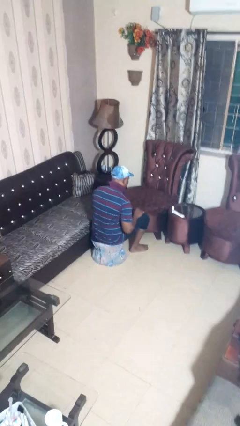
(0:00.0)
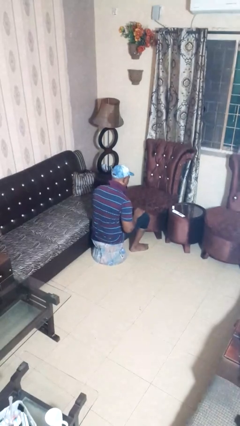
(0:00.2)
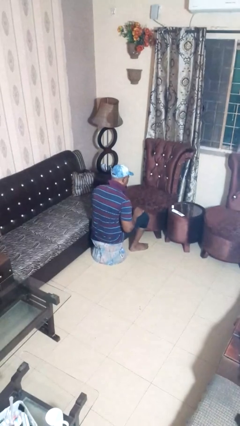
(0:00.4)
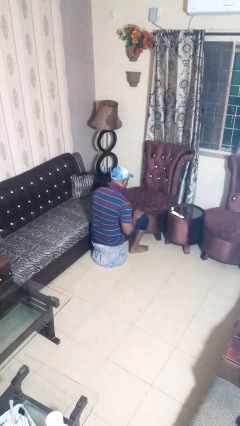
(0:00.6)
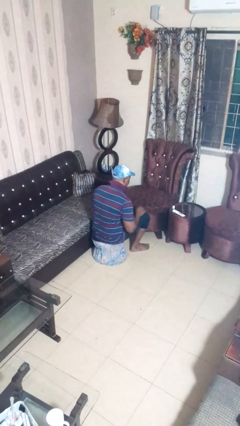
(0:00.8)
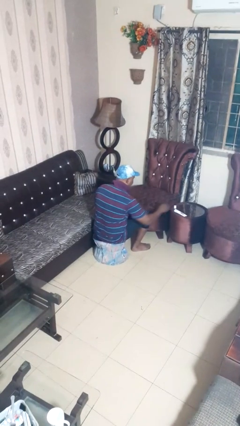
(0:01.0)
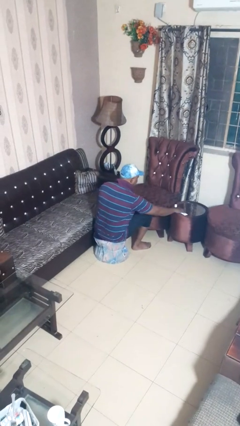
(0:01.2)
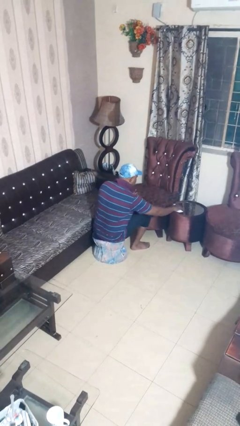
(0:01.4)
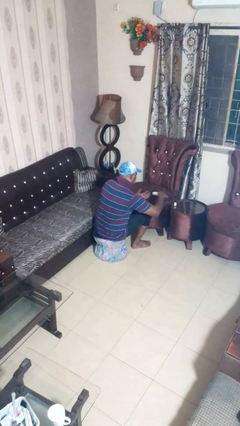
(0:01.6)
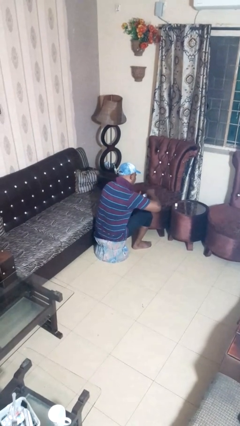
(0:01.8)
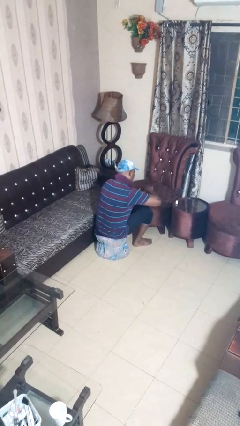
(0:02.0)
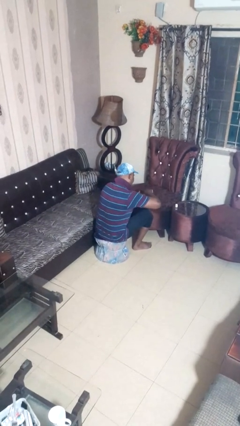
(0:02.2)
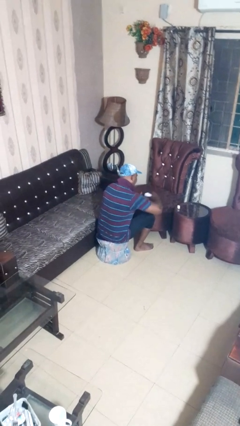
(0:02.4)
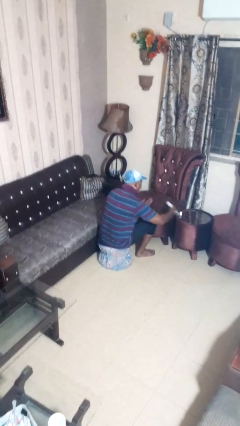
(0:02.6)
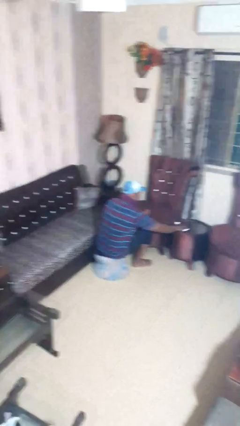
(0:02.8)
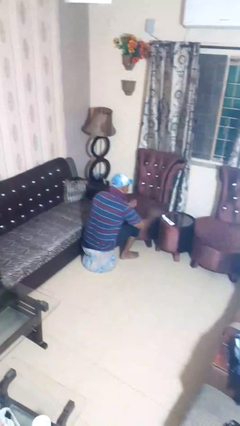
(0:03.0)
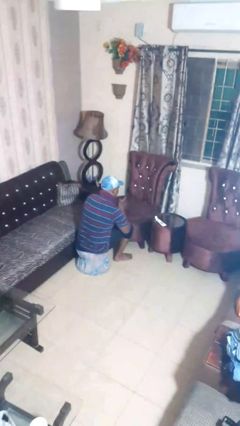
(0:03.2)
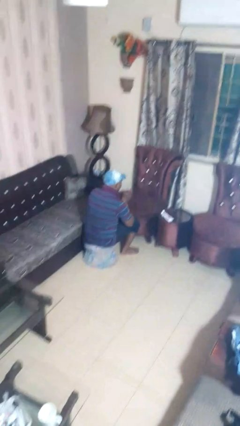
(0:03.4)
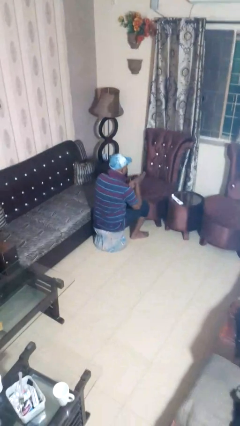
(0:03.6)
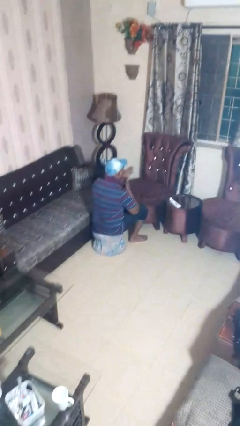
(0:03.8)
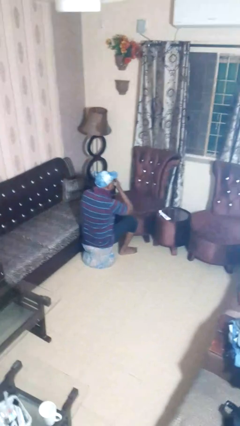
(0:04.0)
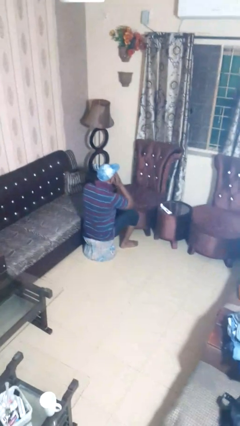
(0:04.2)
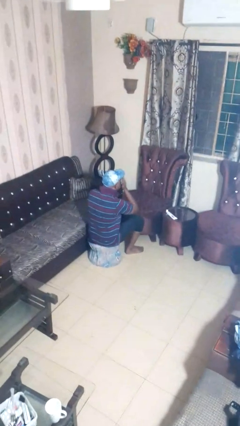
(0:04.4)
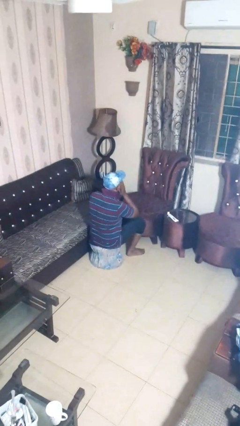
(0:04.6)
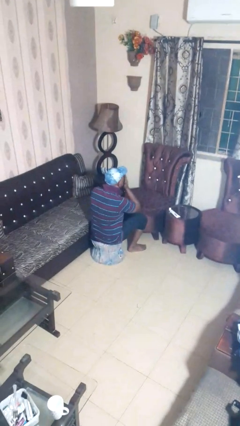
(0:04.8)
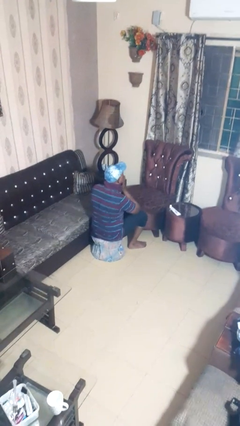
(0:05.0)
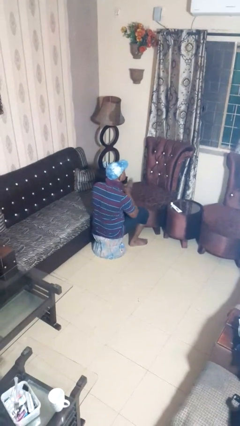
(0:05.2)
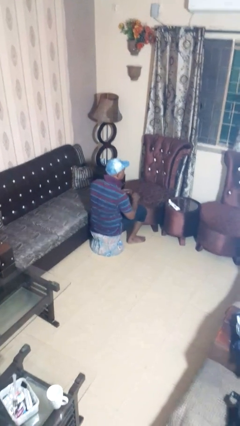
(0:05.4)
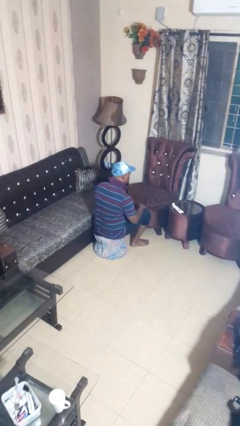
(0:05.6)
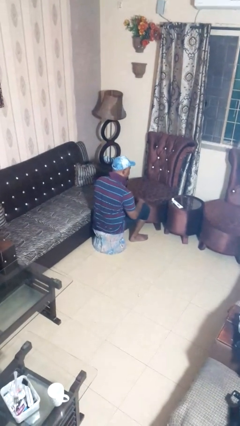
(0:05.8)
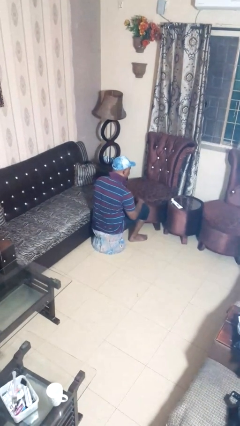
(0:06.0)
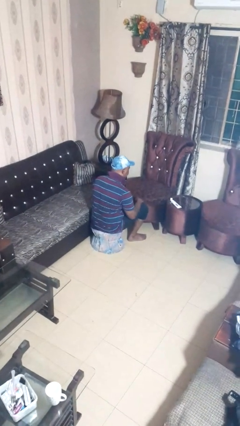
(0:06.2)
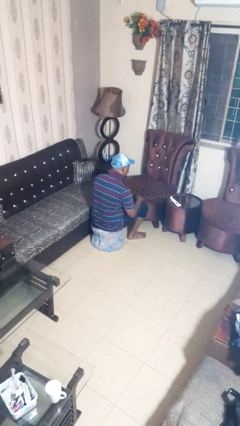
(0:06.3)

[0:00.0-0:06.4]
person applies sunscreen

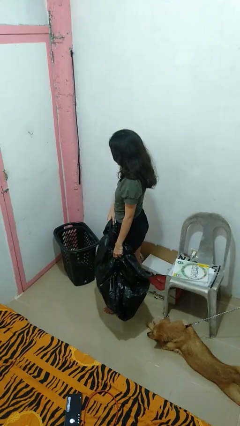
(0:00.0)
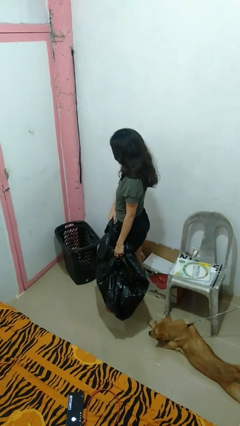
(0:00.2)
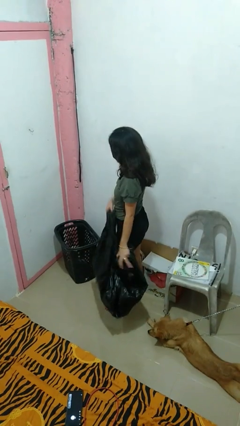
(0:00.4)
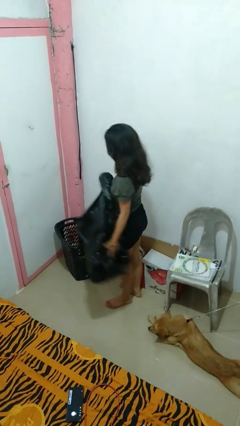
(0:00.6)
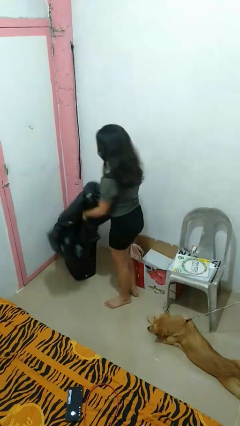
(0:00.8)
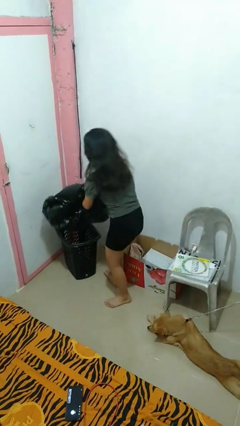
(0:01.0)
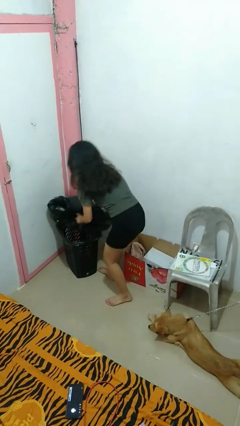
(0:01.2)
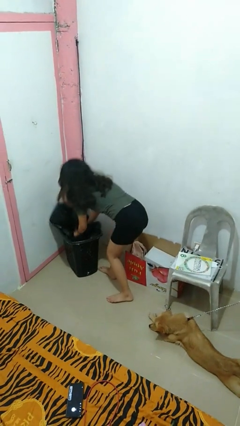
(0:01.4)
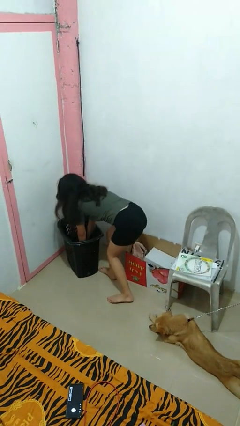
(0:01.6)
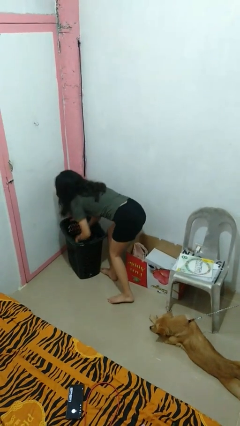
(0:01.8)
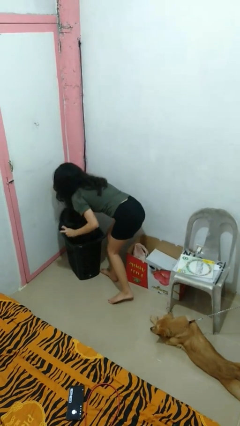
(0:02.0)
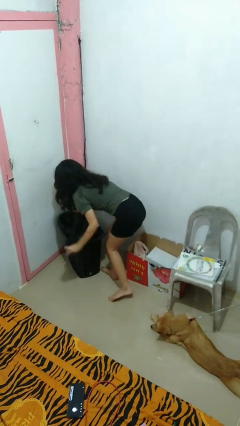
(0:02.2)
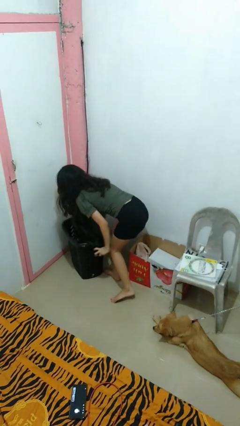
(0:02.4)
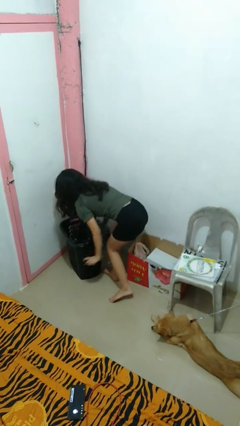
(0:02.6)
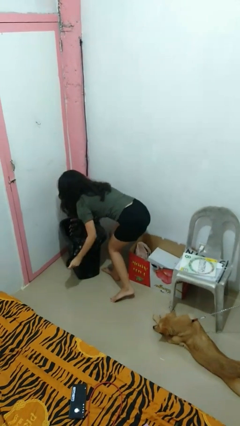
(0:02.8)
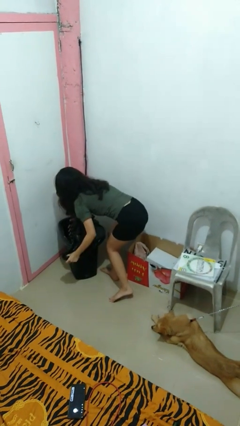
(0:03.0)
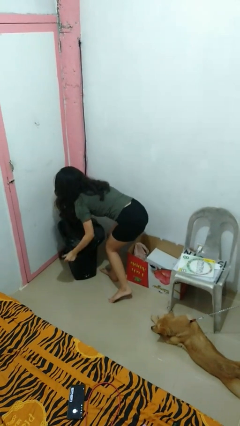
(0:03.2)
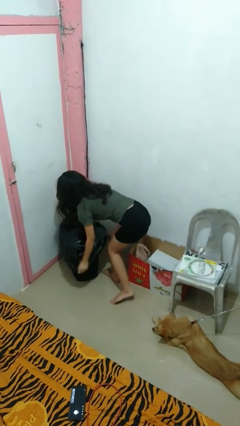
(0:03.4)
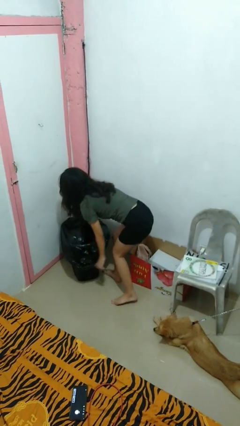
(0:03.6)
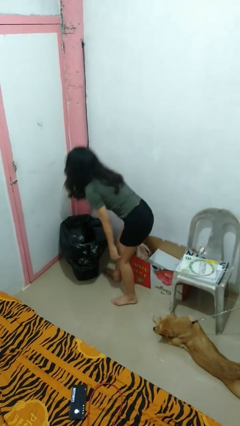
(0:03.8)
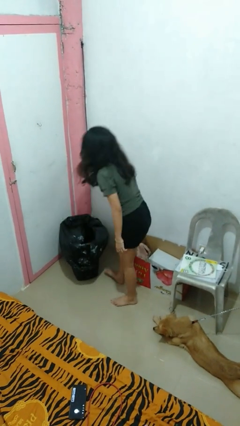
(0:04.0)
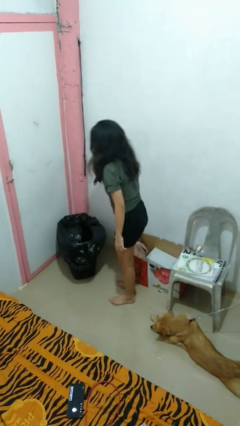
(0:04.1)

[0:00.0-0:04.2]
person inserts trashbag into trashcan

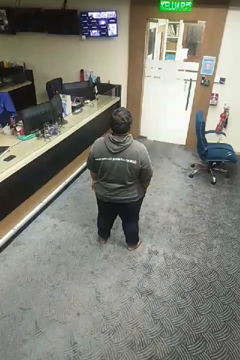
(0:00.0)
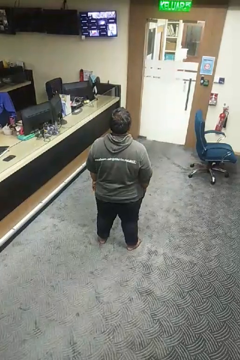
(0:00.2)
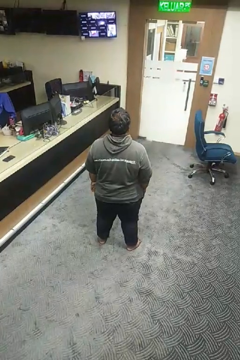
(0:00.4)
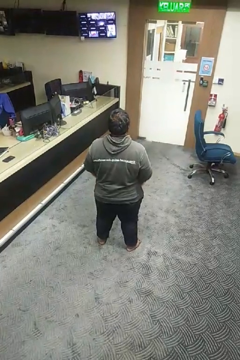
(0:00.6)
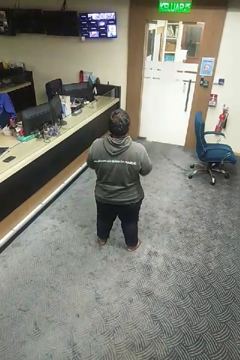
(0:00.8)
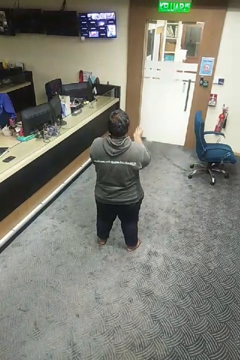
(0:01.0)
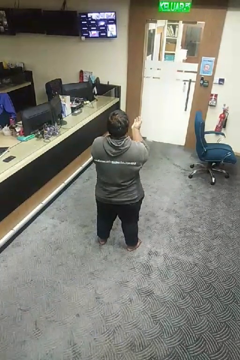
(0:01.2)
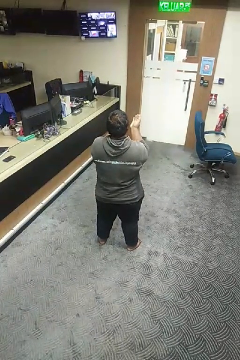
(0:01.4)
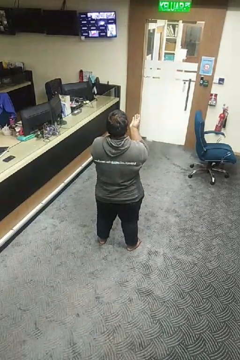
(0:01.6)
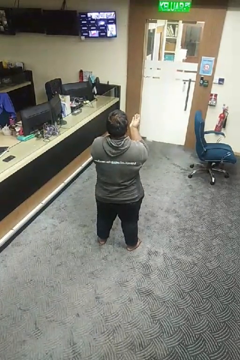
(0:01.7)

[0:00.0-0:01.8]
person prays

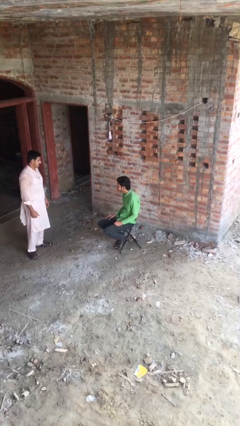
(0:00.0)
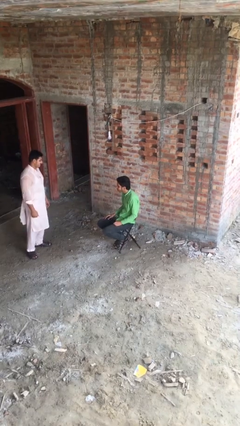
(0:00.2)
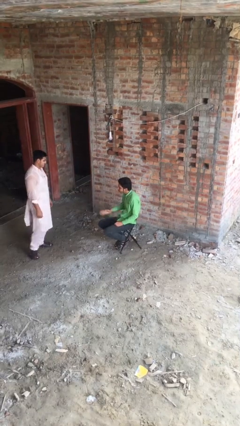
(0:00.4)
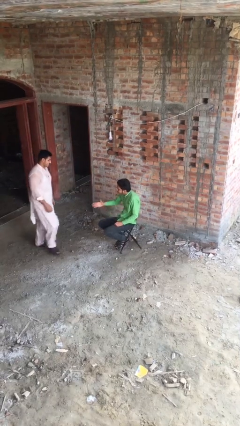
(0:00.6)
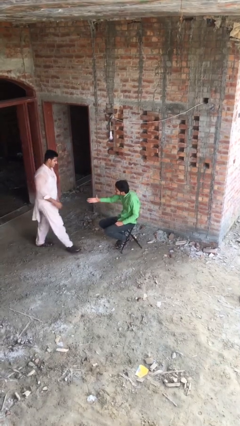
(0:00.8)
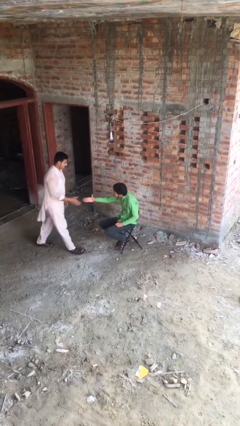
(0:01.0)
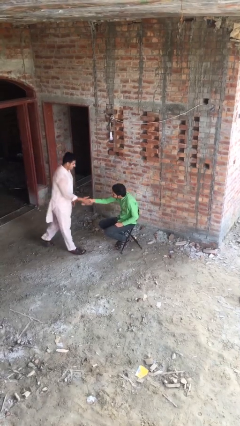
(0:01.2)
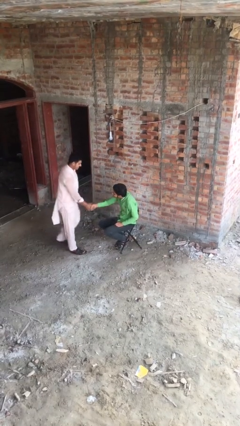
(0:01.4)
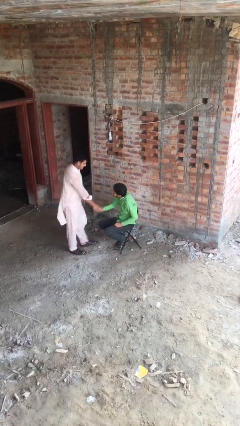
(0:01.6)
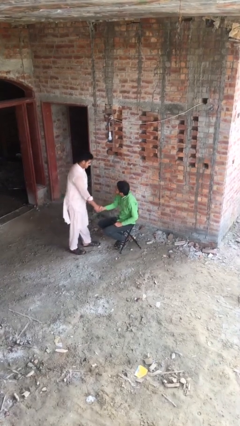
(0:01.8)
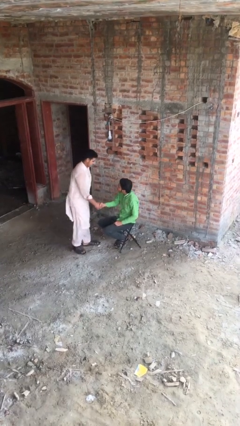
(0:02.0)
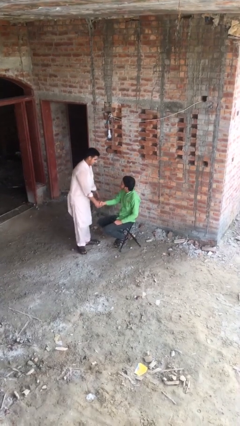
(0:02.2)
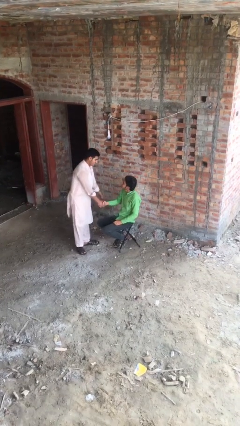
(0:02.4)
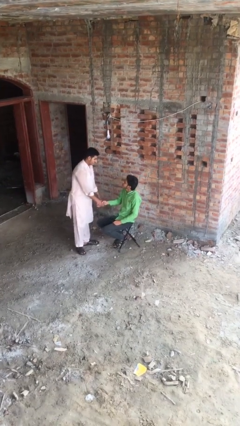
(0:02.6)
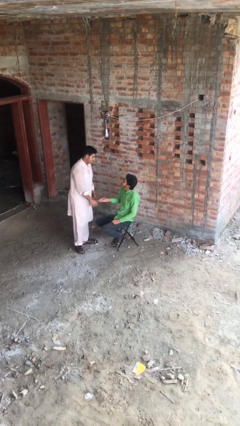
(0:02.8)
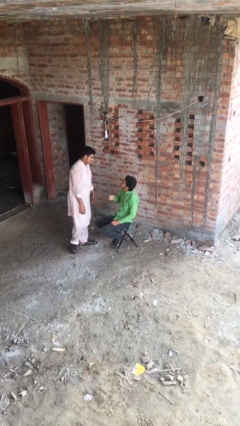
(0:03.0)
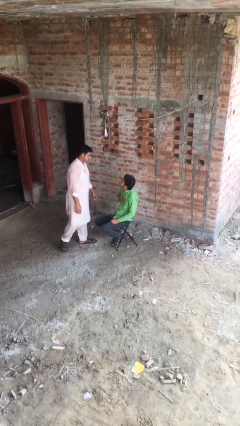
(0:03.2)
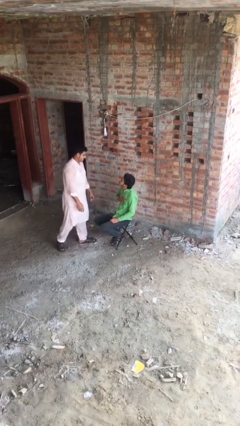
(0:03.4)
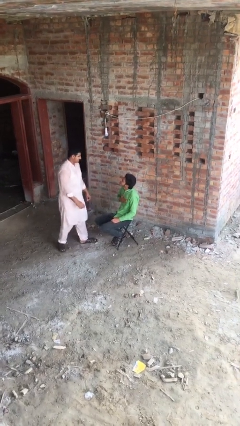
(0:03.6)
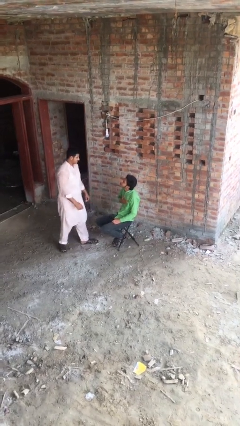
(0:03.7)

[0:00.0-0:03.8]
person shakes hand

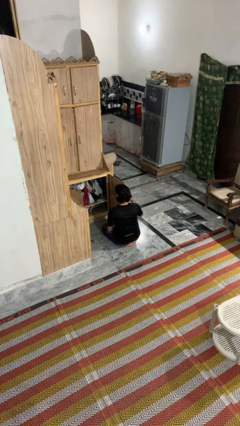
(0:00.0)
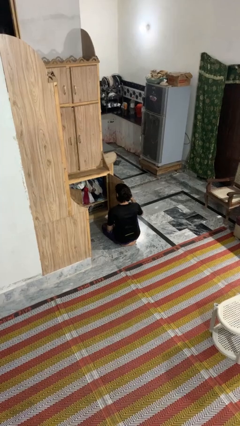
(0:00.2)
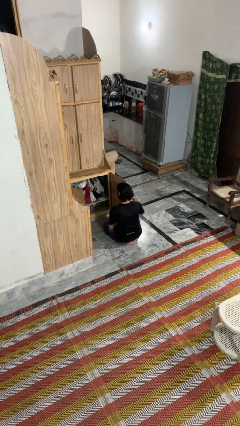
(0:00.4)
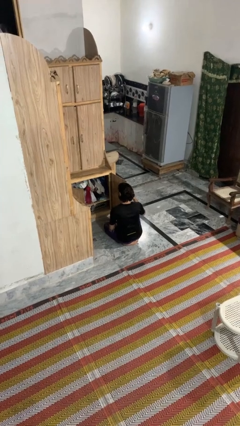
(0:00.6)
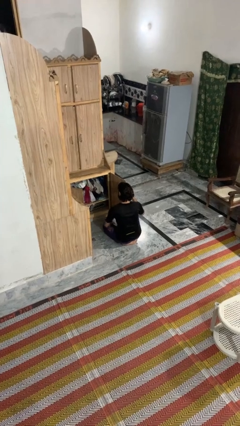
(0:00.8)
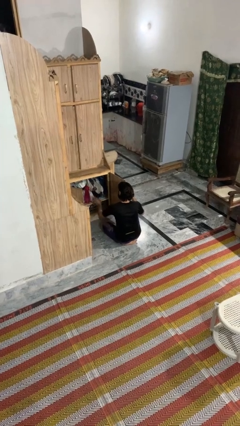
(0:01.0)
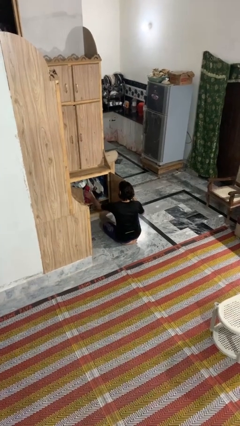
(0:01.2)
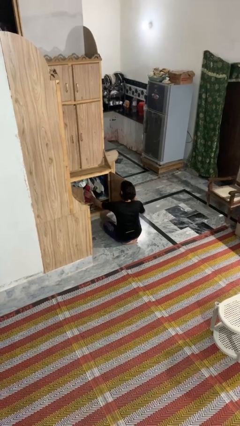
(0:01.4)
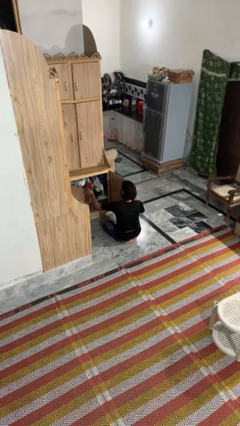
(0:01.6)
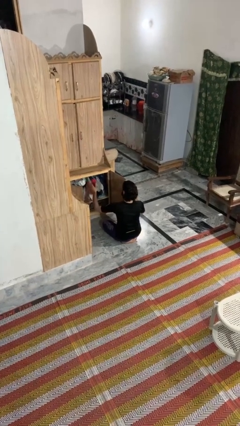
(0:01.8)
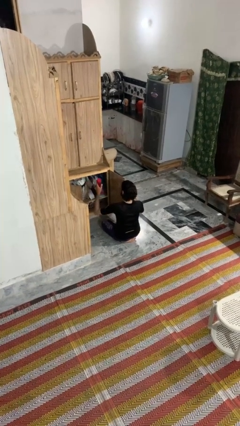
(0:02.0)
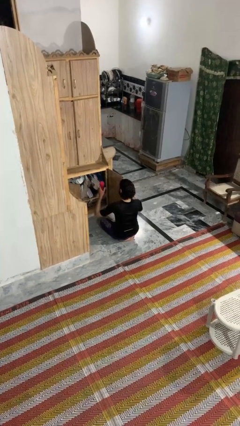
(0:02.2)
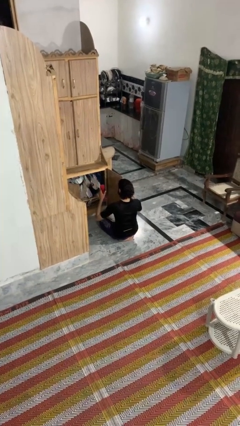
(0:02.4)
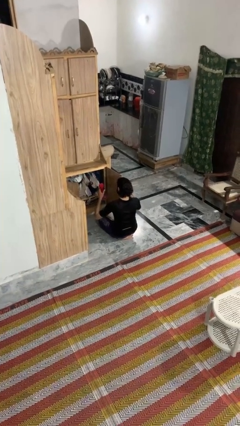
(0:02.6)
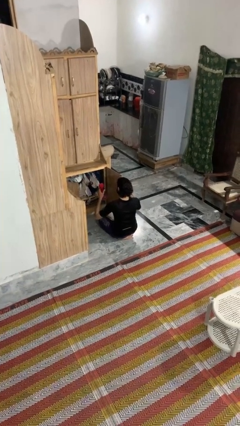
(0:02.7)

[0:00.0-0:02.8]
person picks up object from cabinet
